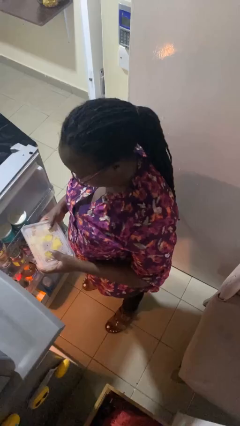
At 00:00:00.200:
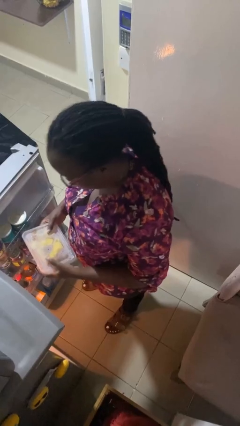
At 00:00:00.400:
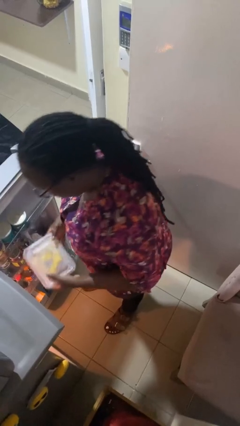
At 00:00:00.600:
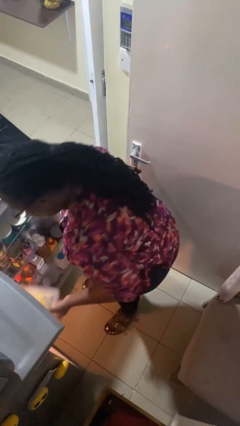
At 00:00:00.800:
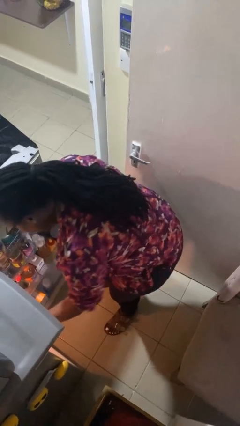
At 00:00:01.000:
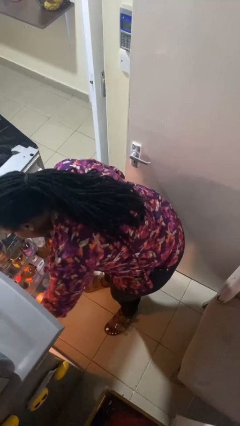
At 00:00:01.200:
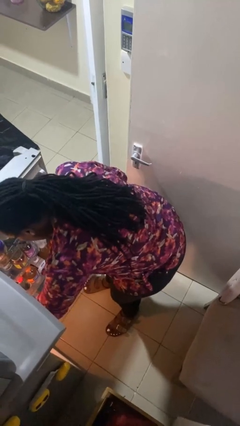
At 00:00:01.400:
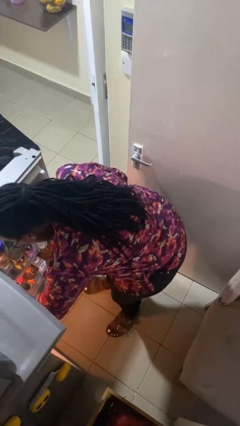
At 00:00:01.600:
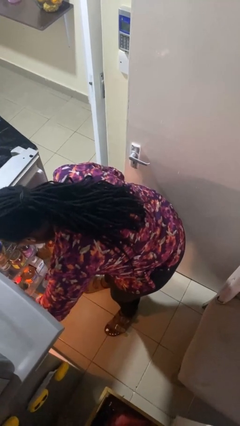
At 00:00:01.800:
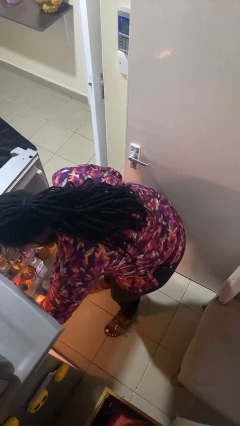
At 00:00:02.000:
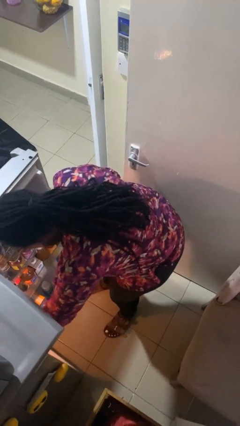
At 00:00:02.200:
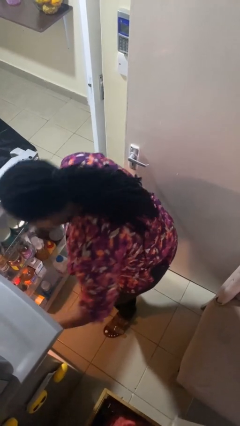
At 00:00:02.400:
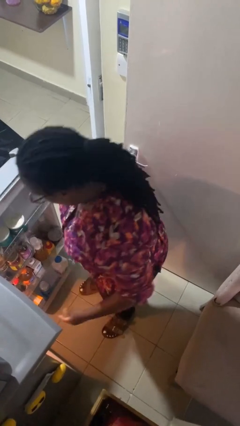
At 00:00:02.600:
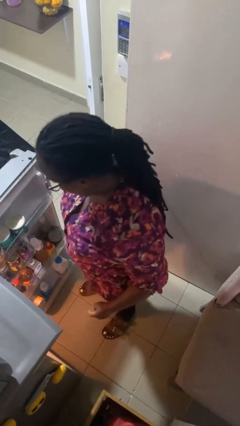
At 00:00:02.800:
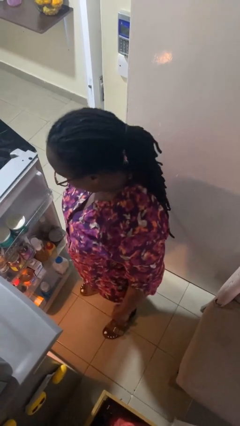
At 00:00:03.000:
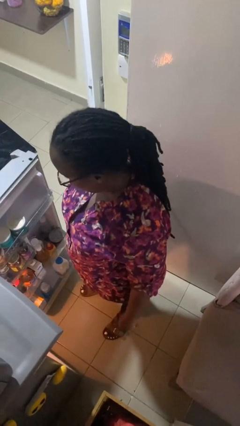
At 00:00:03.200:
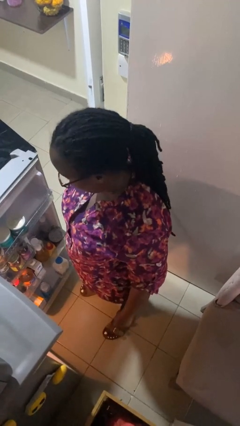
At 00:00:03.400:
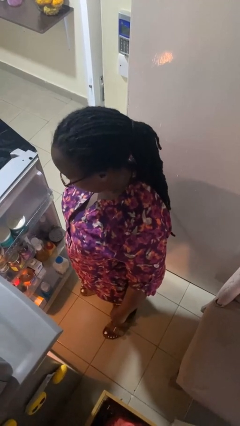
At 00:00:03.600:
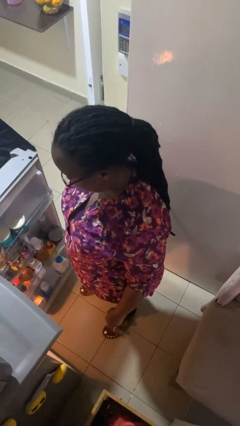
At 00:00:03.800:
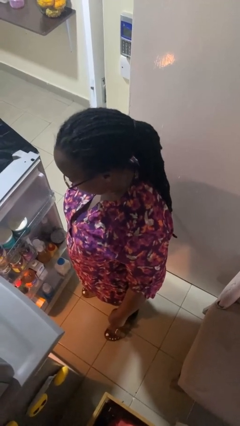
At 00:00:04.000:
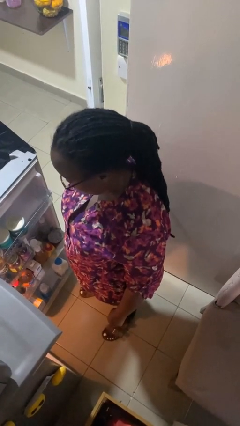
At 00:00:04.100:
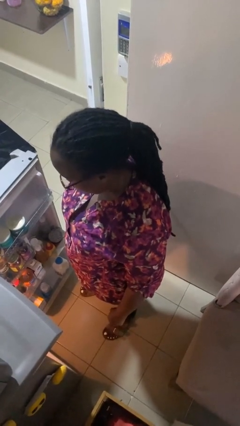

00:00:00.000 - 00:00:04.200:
person puts object into refrigerator

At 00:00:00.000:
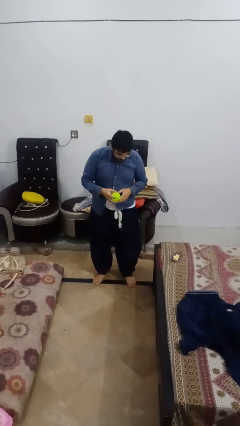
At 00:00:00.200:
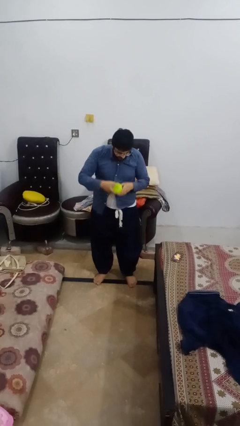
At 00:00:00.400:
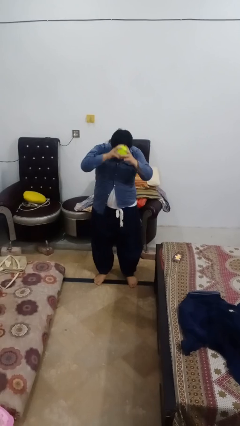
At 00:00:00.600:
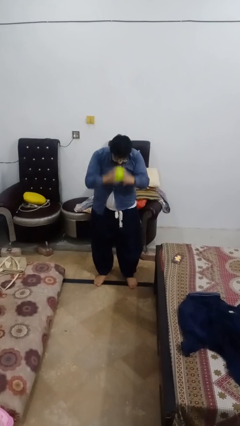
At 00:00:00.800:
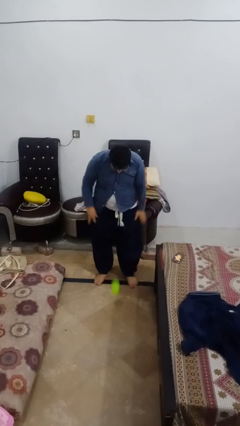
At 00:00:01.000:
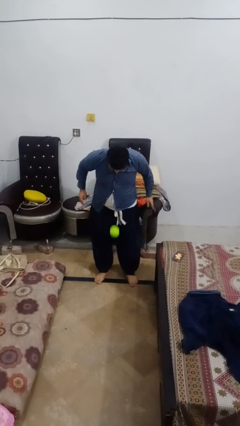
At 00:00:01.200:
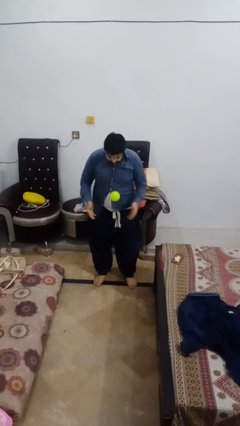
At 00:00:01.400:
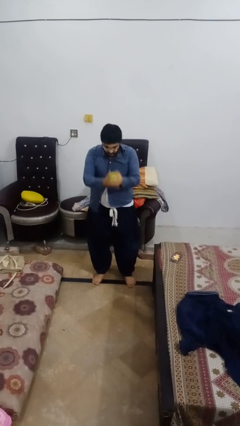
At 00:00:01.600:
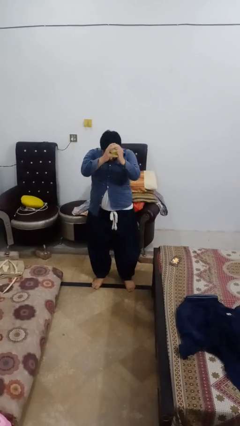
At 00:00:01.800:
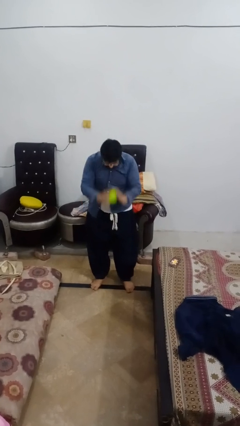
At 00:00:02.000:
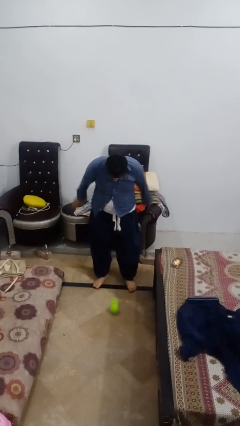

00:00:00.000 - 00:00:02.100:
person bounces ball on floor

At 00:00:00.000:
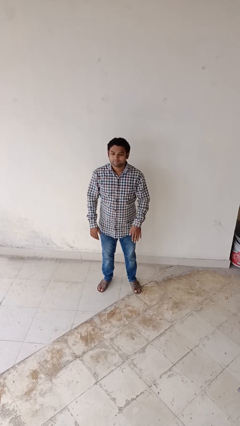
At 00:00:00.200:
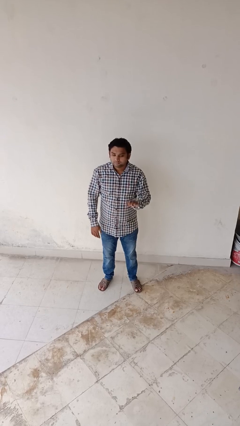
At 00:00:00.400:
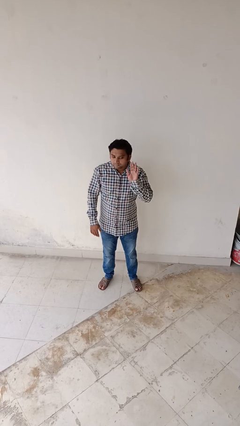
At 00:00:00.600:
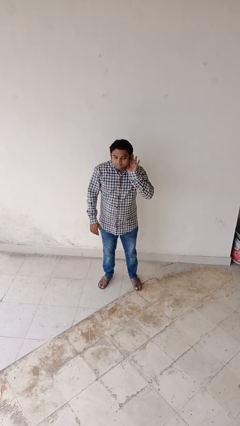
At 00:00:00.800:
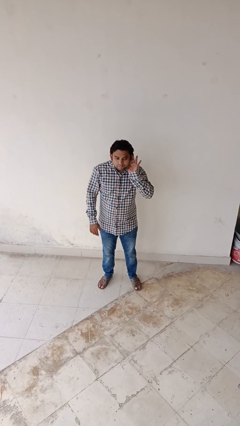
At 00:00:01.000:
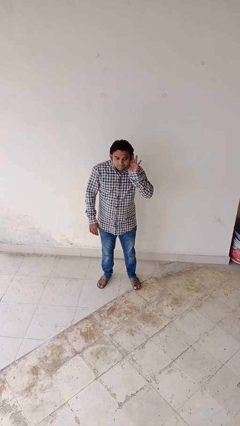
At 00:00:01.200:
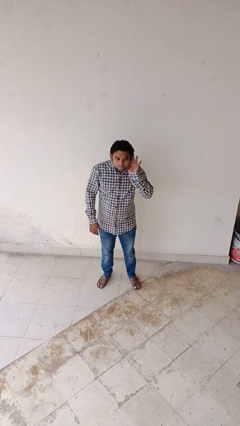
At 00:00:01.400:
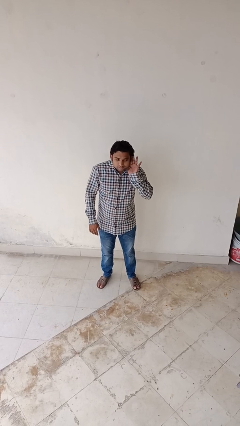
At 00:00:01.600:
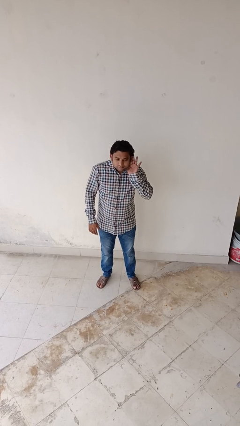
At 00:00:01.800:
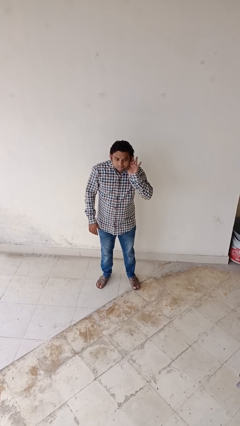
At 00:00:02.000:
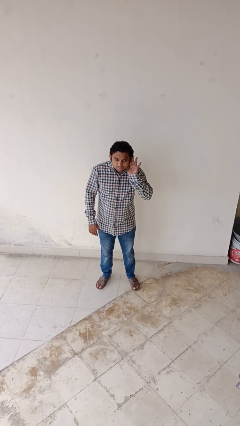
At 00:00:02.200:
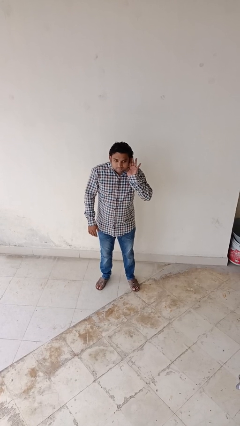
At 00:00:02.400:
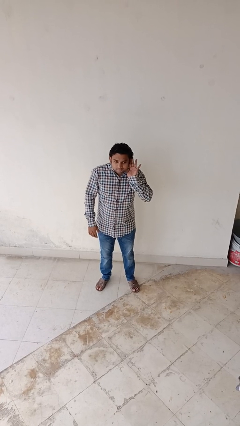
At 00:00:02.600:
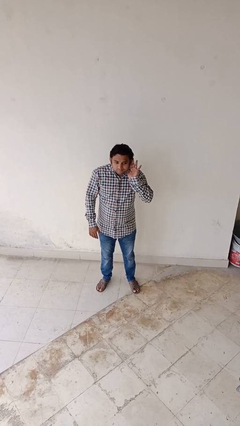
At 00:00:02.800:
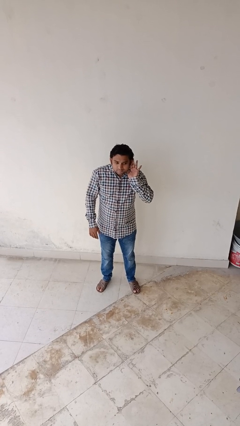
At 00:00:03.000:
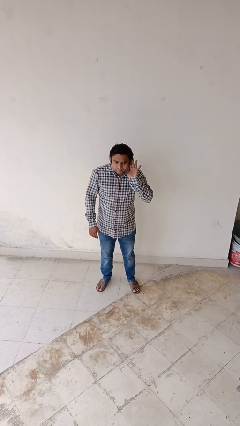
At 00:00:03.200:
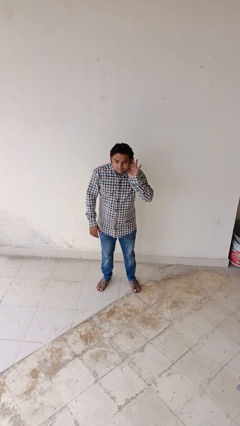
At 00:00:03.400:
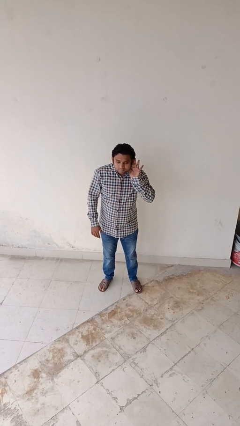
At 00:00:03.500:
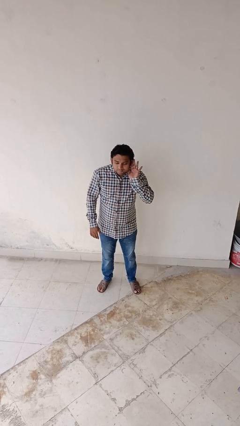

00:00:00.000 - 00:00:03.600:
person gestures listen closely

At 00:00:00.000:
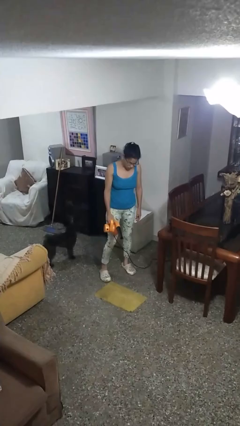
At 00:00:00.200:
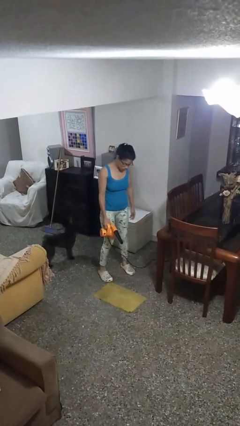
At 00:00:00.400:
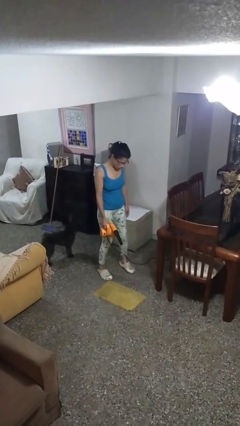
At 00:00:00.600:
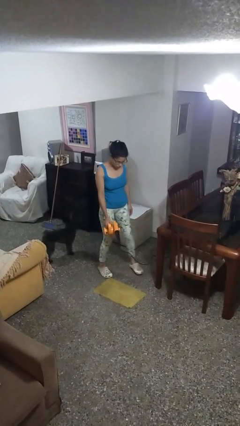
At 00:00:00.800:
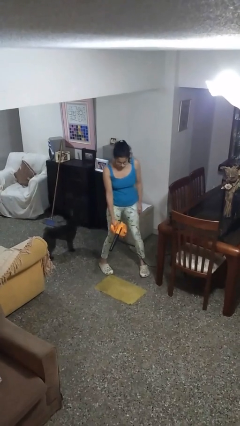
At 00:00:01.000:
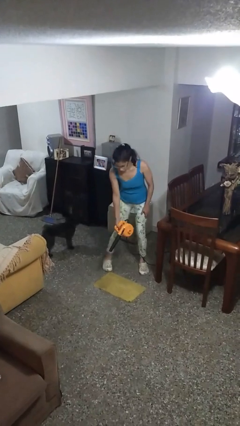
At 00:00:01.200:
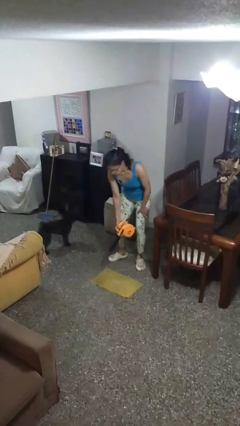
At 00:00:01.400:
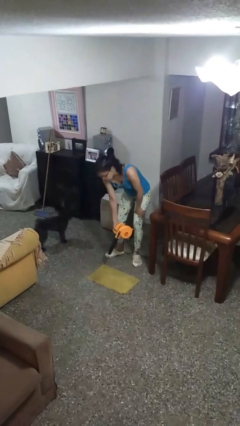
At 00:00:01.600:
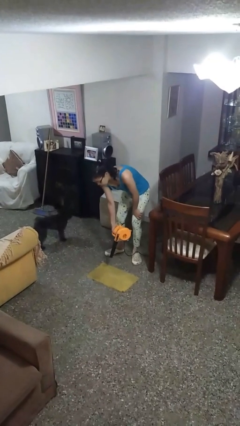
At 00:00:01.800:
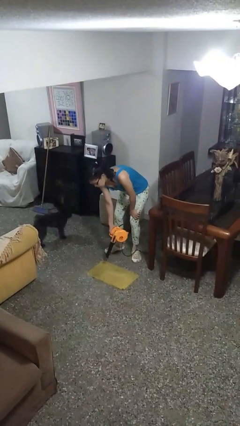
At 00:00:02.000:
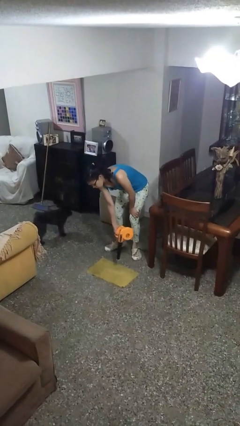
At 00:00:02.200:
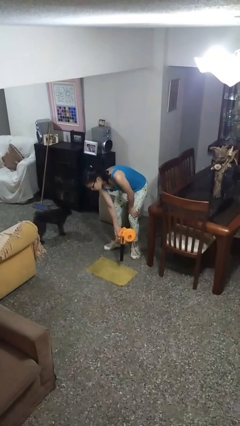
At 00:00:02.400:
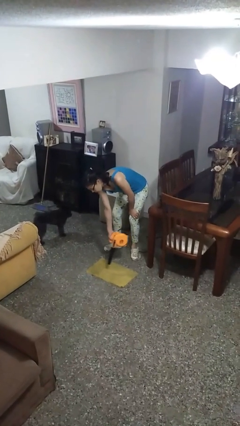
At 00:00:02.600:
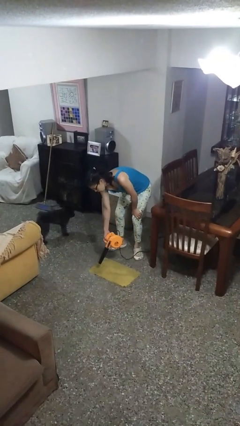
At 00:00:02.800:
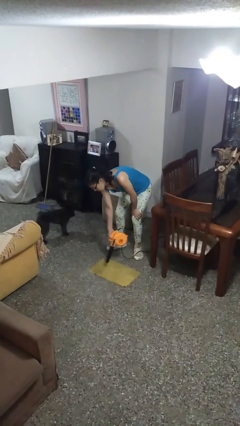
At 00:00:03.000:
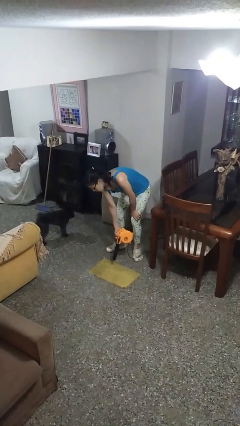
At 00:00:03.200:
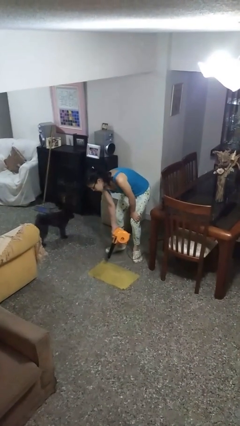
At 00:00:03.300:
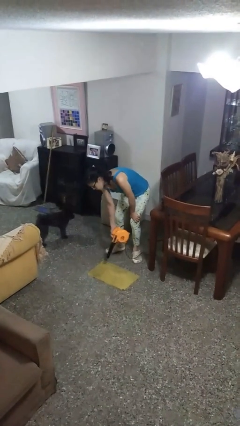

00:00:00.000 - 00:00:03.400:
person vacuums carpet

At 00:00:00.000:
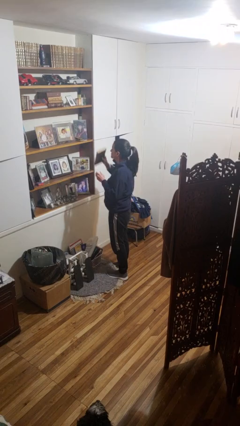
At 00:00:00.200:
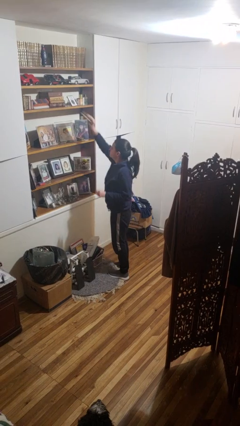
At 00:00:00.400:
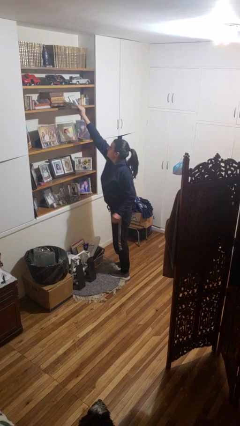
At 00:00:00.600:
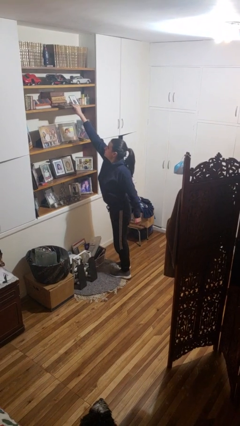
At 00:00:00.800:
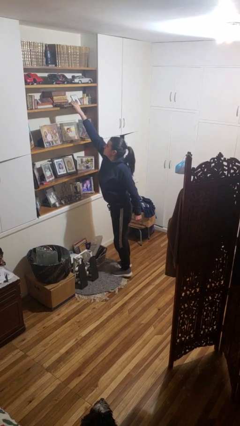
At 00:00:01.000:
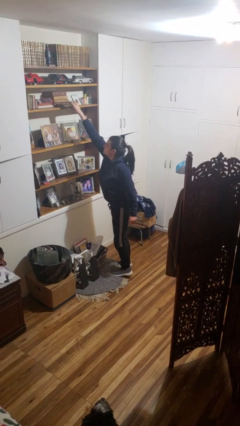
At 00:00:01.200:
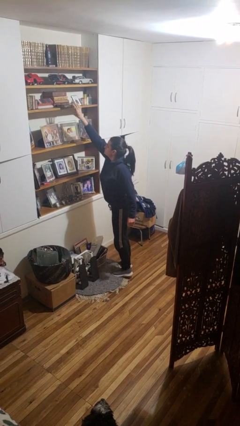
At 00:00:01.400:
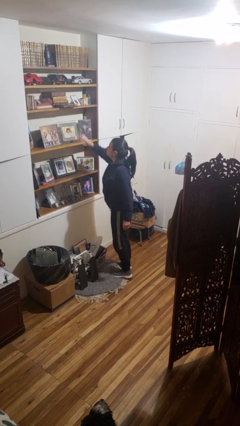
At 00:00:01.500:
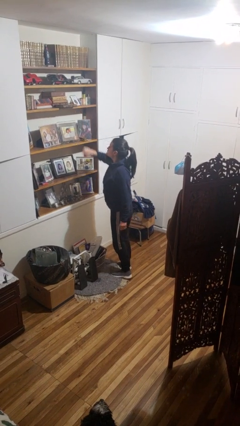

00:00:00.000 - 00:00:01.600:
person puts down object on shelf

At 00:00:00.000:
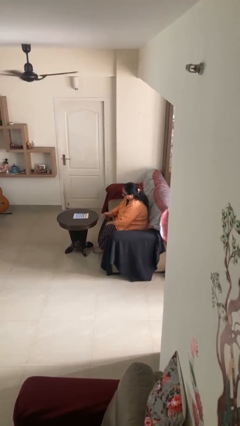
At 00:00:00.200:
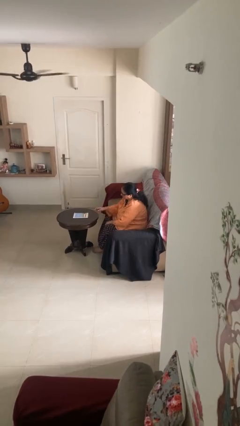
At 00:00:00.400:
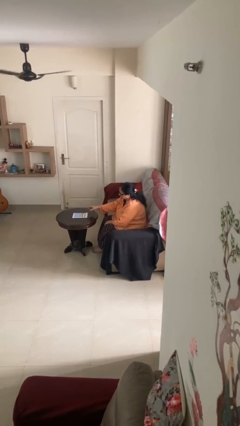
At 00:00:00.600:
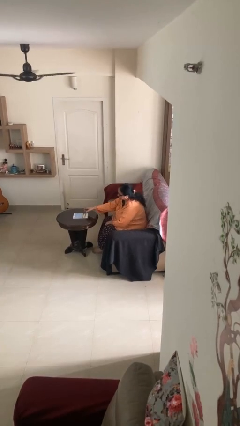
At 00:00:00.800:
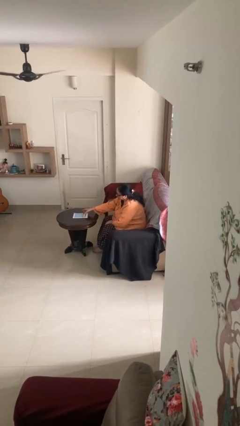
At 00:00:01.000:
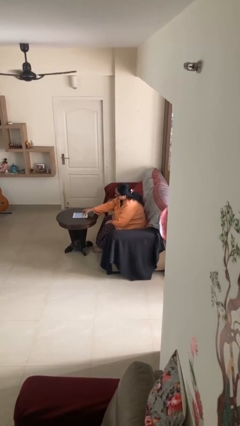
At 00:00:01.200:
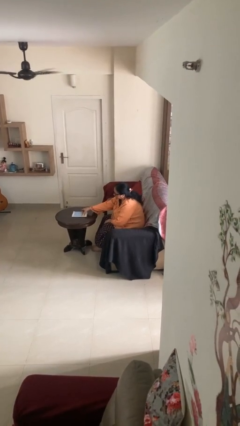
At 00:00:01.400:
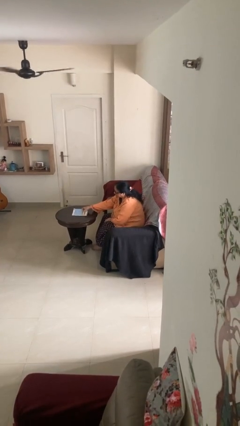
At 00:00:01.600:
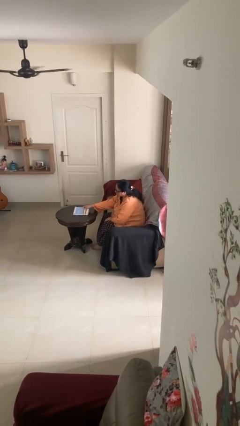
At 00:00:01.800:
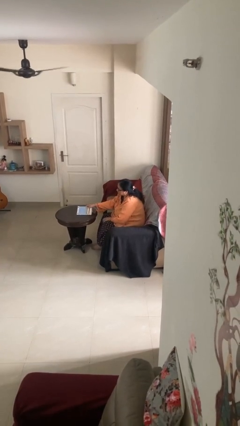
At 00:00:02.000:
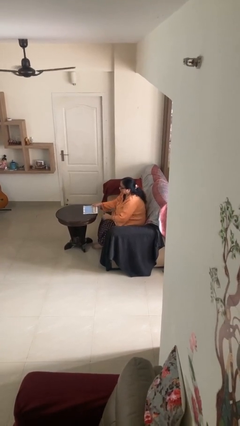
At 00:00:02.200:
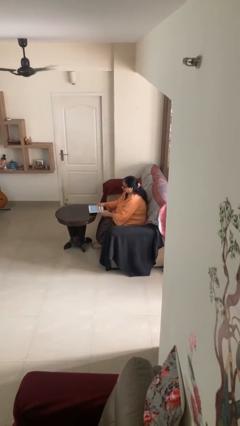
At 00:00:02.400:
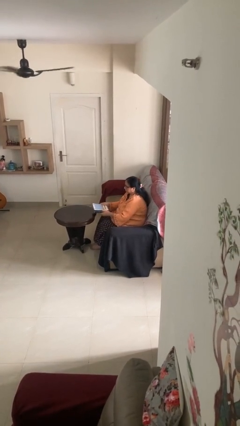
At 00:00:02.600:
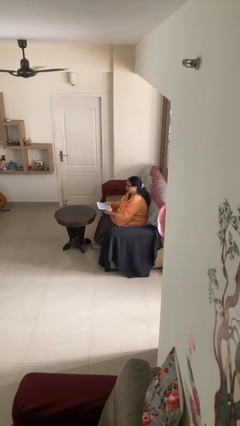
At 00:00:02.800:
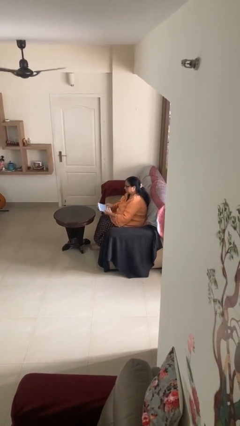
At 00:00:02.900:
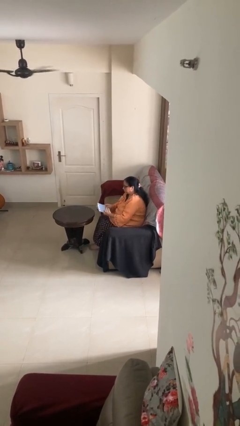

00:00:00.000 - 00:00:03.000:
person picks up object from table
